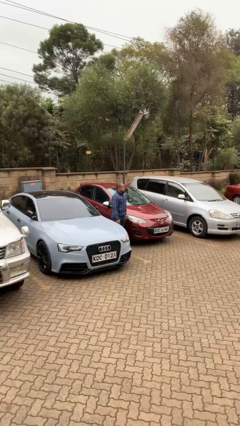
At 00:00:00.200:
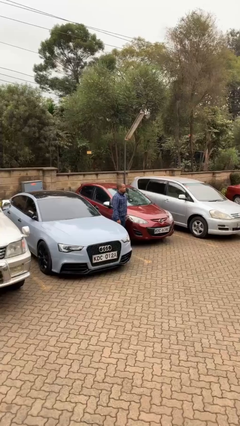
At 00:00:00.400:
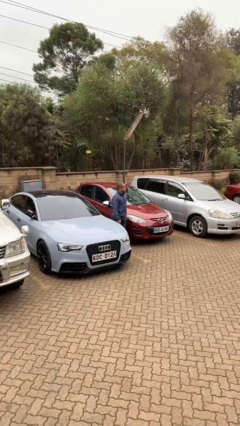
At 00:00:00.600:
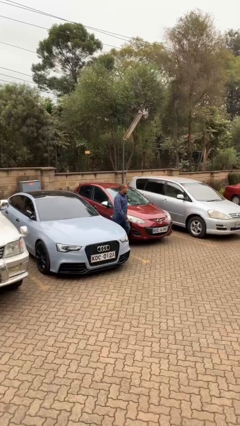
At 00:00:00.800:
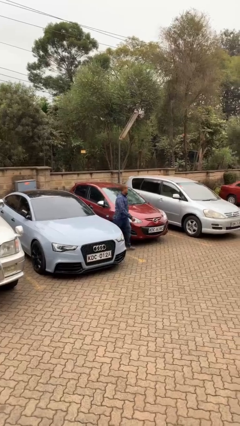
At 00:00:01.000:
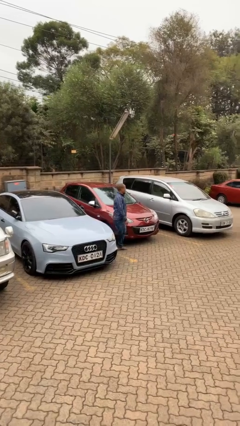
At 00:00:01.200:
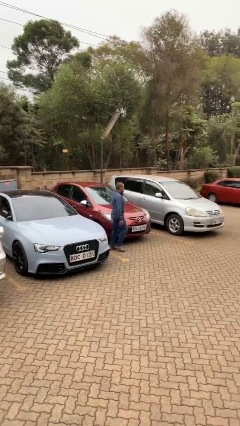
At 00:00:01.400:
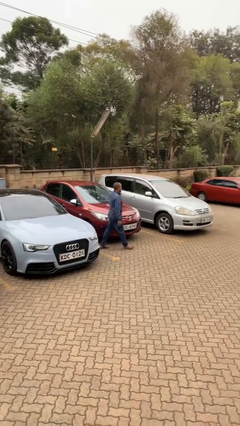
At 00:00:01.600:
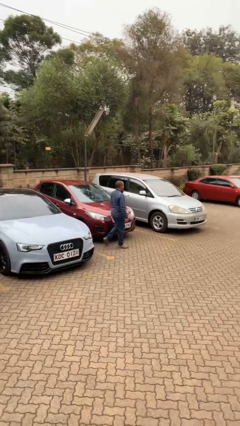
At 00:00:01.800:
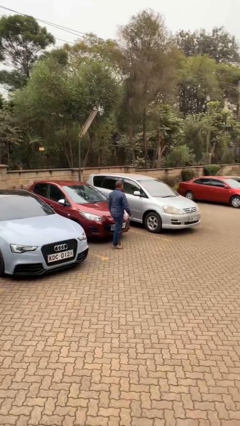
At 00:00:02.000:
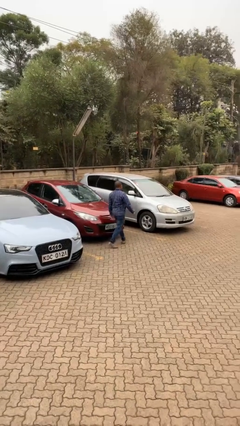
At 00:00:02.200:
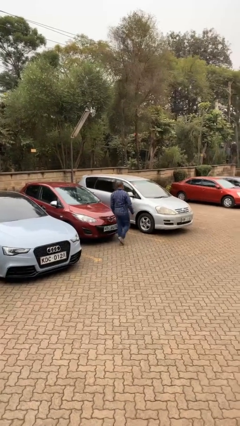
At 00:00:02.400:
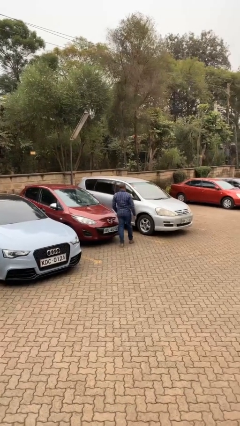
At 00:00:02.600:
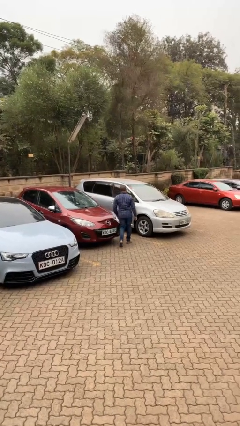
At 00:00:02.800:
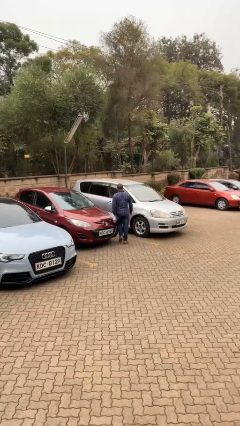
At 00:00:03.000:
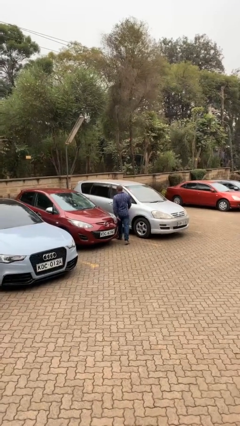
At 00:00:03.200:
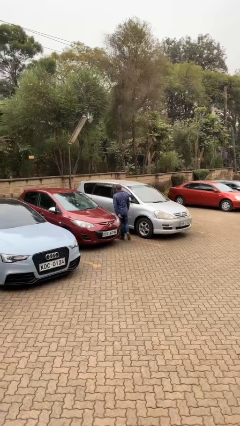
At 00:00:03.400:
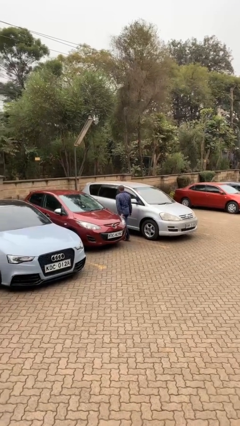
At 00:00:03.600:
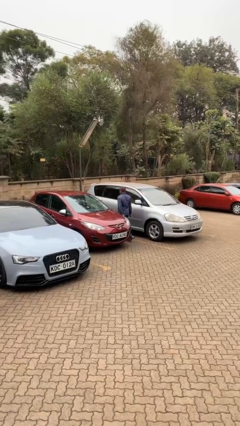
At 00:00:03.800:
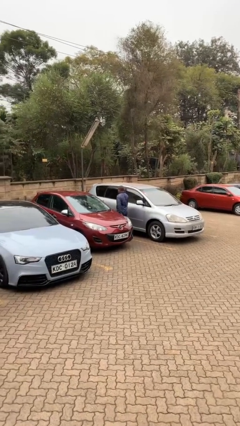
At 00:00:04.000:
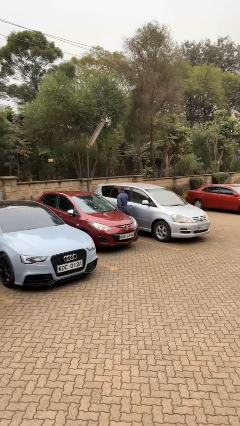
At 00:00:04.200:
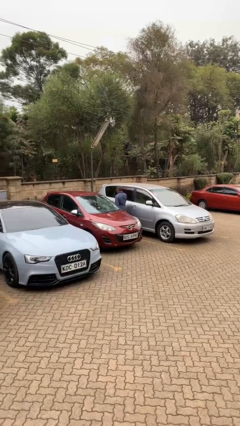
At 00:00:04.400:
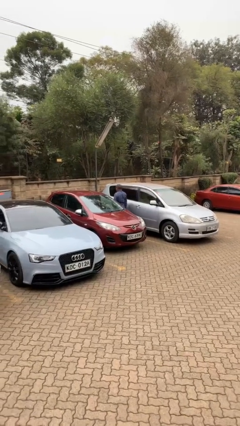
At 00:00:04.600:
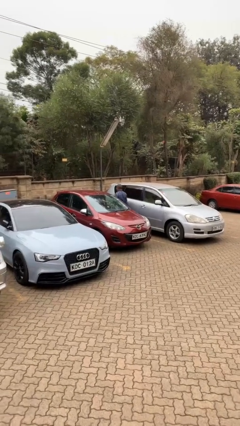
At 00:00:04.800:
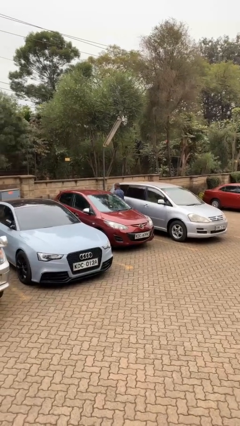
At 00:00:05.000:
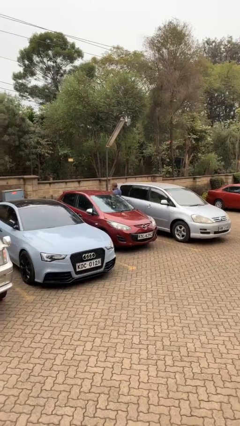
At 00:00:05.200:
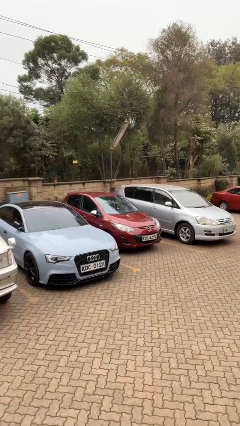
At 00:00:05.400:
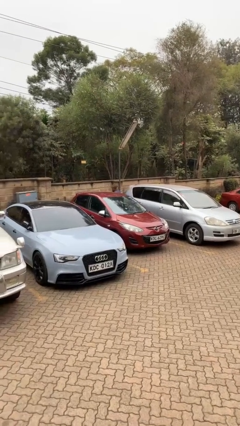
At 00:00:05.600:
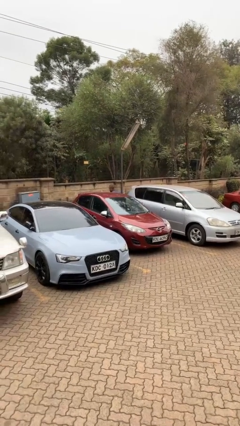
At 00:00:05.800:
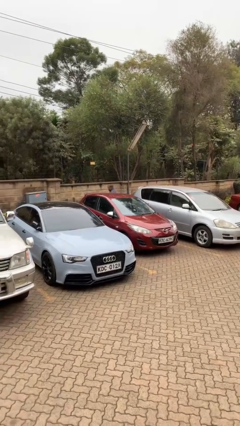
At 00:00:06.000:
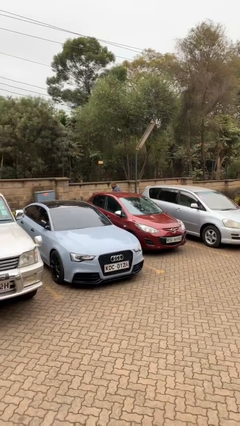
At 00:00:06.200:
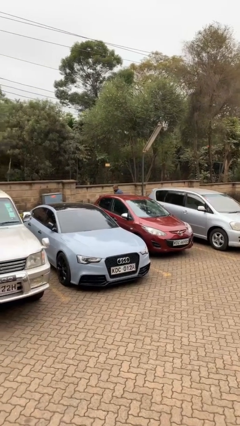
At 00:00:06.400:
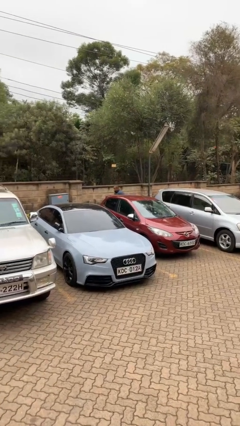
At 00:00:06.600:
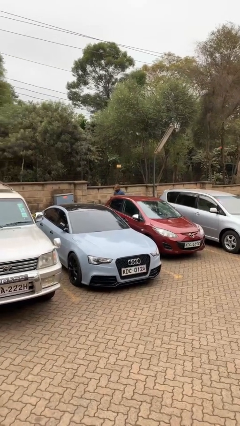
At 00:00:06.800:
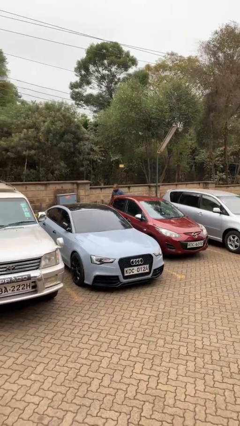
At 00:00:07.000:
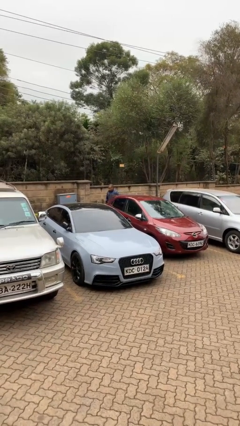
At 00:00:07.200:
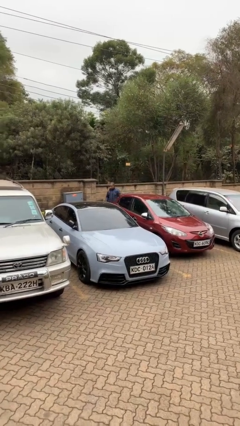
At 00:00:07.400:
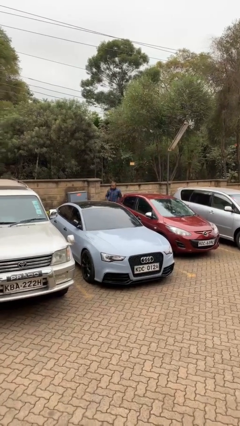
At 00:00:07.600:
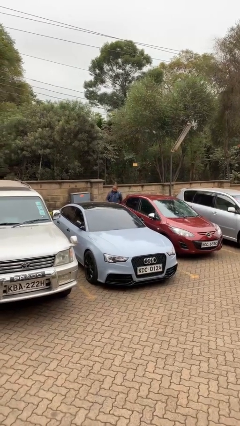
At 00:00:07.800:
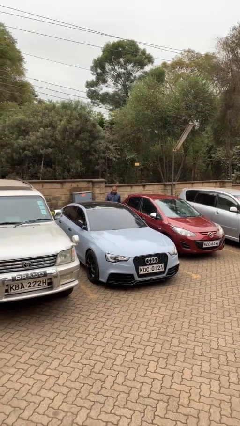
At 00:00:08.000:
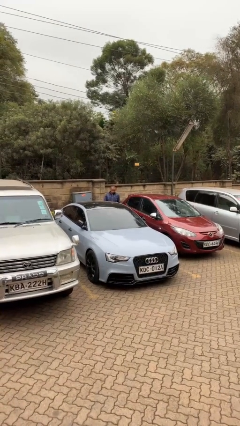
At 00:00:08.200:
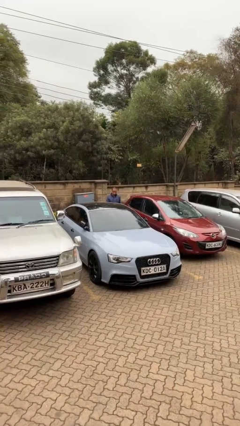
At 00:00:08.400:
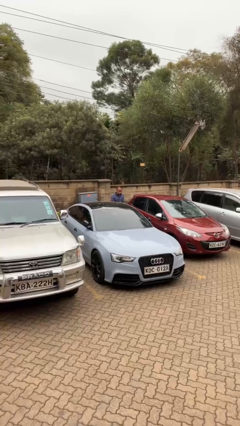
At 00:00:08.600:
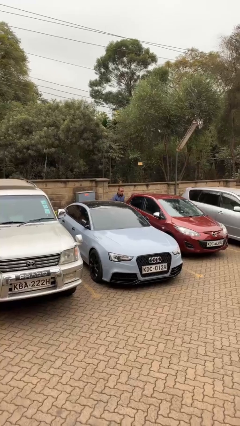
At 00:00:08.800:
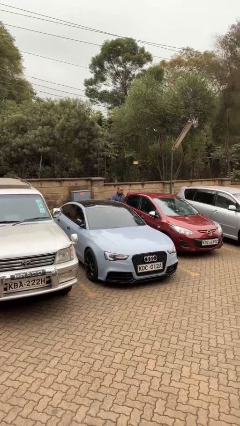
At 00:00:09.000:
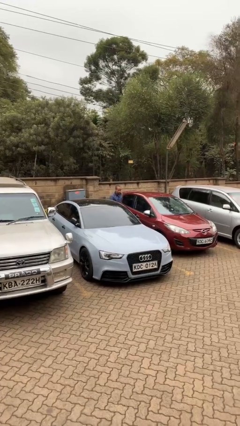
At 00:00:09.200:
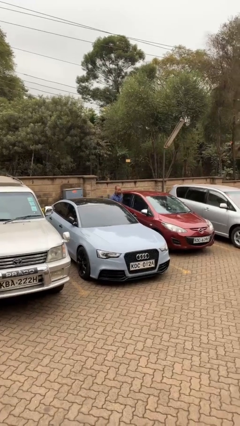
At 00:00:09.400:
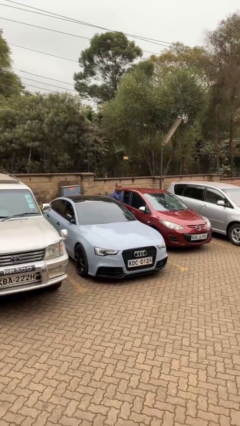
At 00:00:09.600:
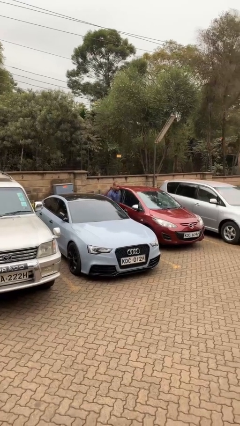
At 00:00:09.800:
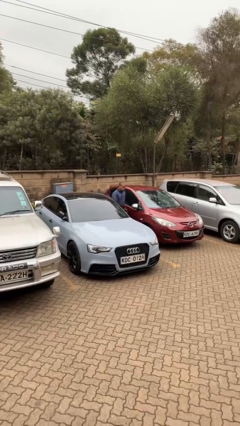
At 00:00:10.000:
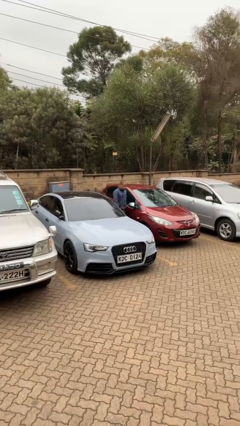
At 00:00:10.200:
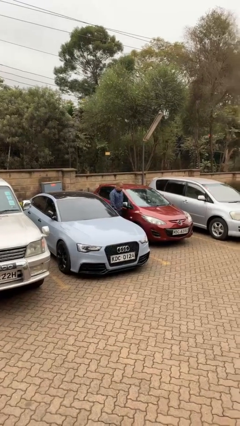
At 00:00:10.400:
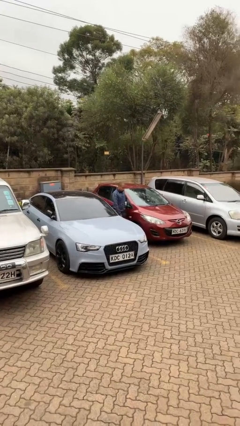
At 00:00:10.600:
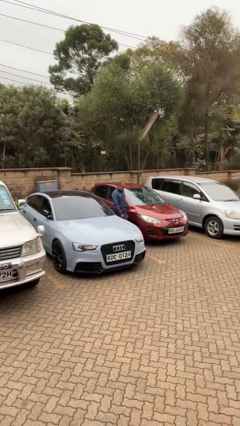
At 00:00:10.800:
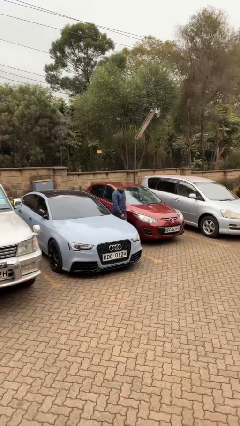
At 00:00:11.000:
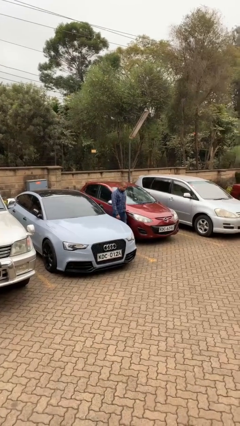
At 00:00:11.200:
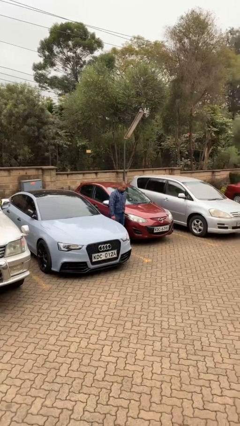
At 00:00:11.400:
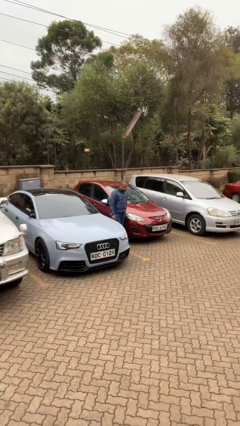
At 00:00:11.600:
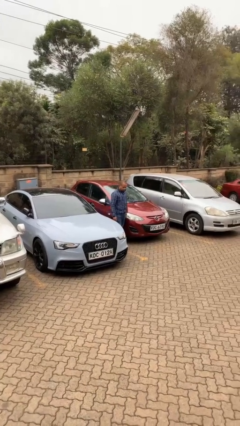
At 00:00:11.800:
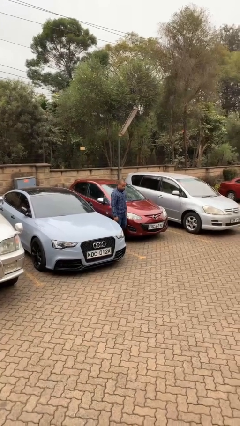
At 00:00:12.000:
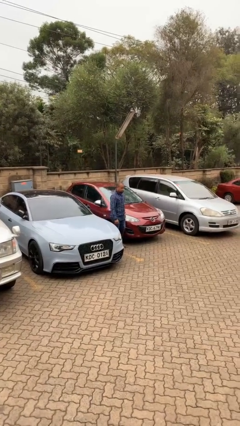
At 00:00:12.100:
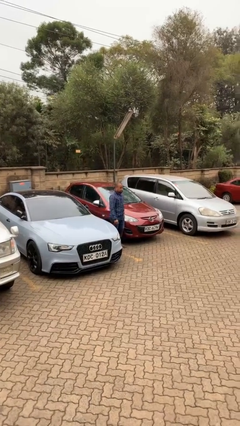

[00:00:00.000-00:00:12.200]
person walks around car

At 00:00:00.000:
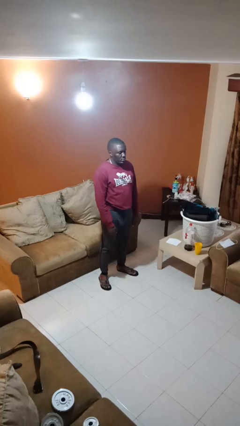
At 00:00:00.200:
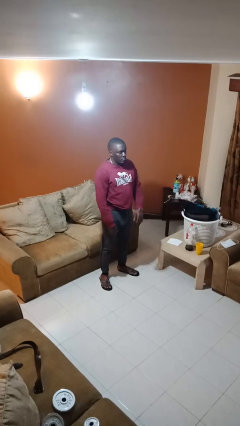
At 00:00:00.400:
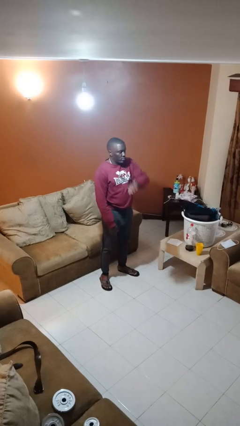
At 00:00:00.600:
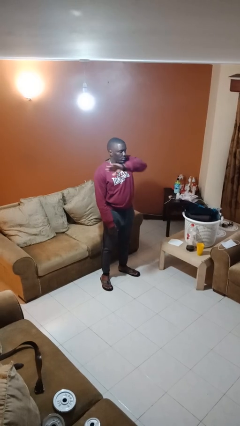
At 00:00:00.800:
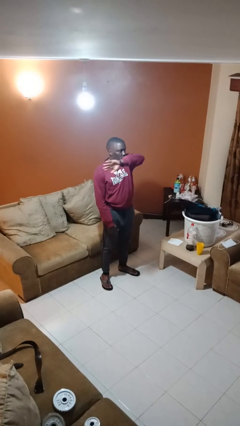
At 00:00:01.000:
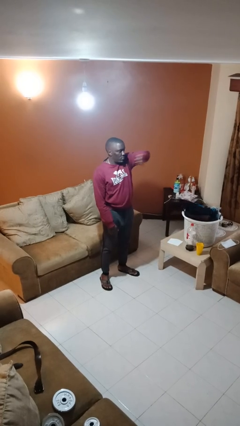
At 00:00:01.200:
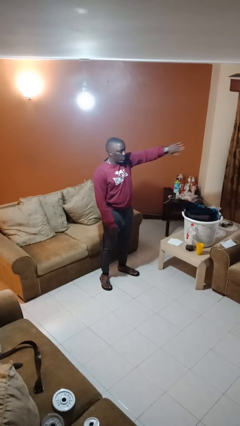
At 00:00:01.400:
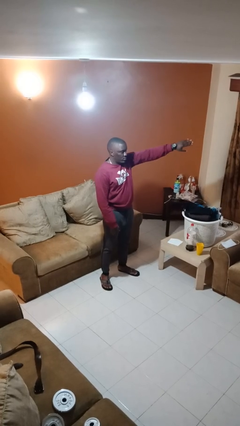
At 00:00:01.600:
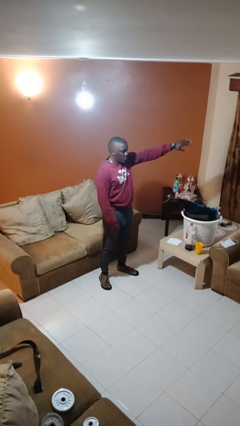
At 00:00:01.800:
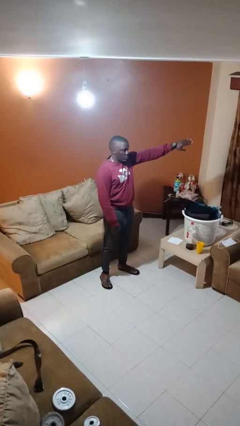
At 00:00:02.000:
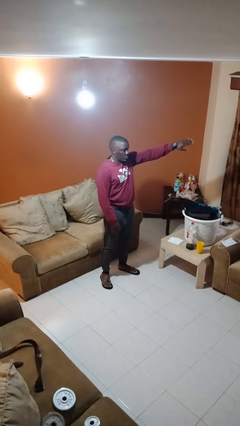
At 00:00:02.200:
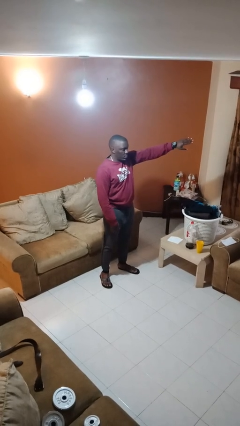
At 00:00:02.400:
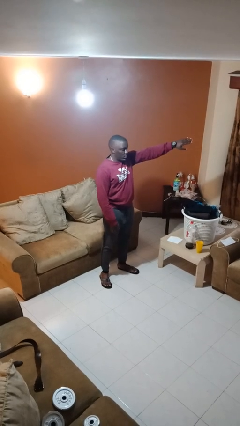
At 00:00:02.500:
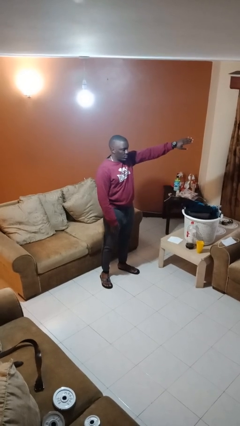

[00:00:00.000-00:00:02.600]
person gestures swipe left

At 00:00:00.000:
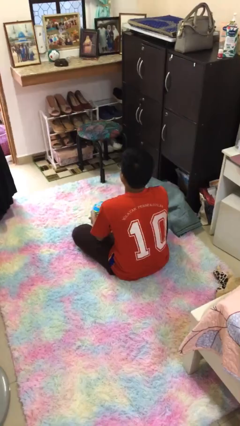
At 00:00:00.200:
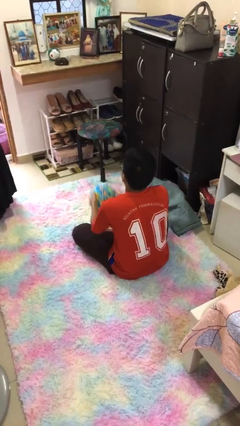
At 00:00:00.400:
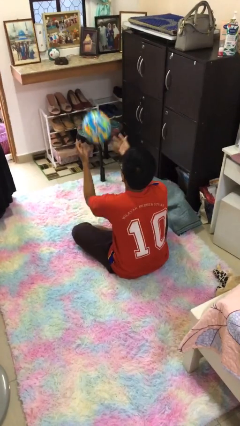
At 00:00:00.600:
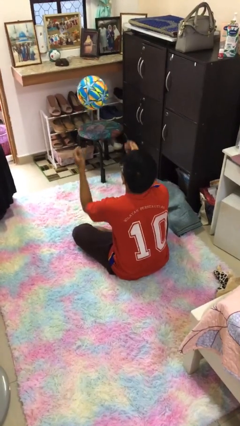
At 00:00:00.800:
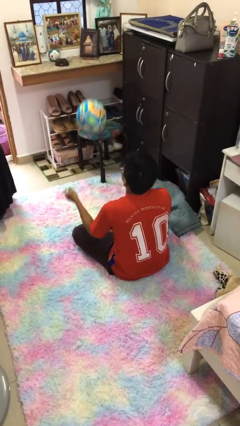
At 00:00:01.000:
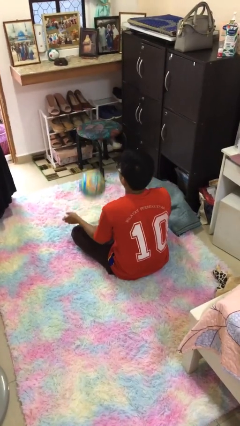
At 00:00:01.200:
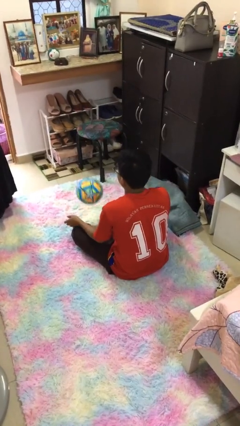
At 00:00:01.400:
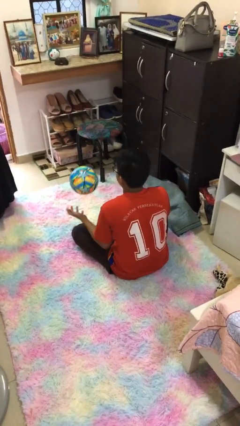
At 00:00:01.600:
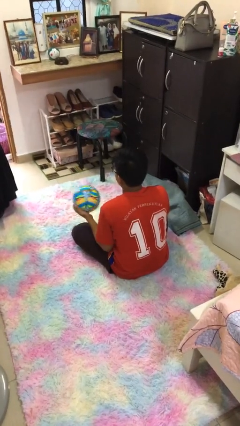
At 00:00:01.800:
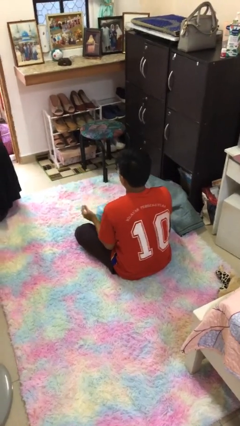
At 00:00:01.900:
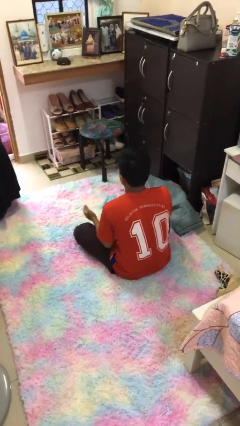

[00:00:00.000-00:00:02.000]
person bounces ball on floor

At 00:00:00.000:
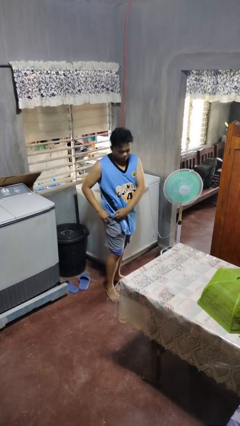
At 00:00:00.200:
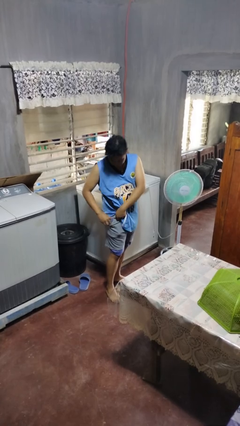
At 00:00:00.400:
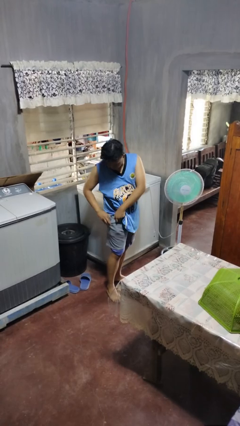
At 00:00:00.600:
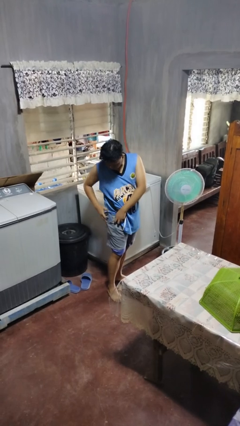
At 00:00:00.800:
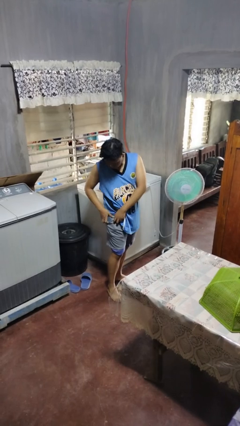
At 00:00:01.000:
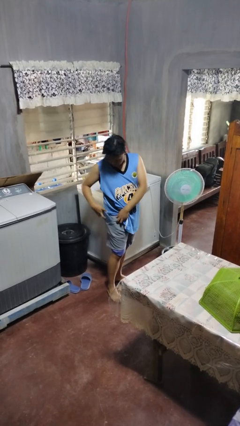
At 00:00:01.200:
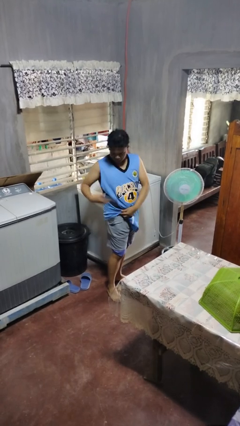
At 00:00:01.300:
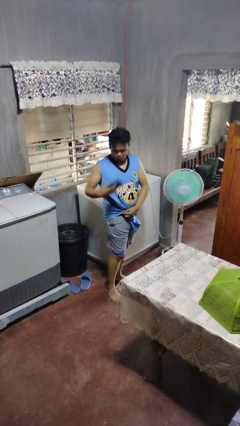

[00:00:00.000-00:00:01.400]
person takes phone from pocket
